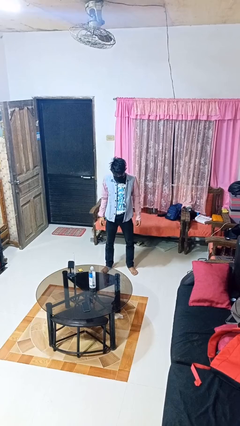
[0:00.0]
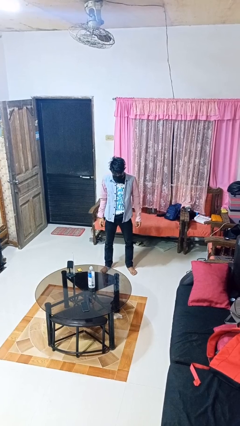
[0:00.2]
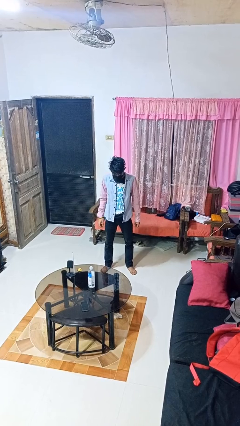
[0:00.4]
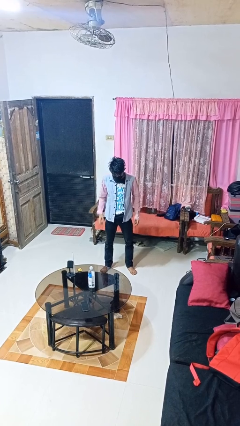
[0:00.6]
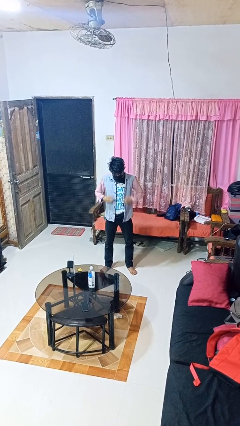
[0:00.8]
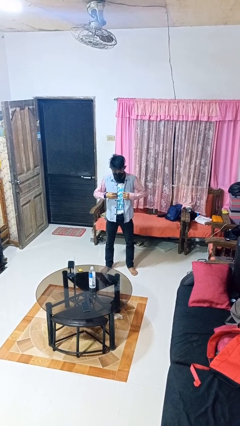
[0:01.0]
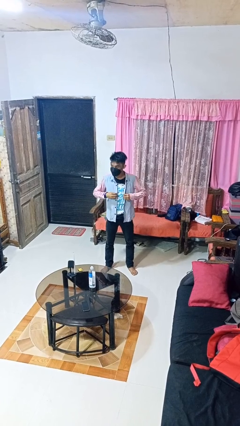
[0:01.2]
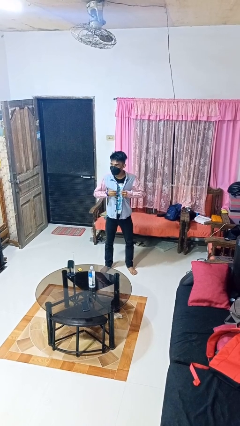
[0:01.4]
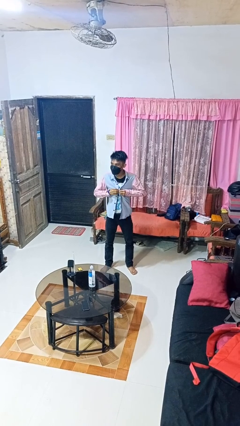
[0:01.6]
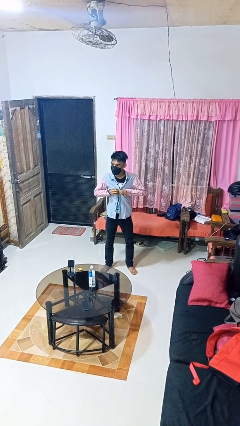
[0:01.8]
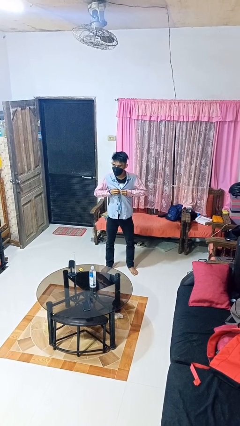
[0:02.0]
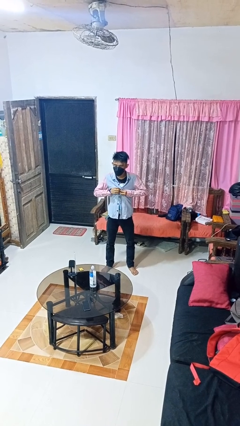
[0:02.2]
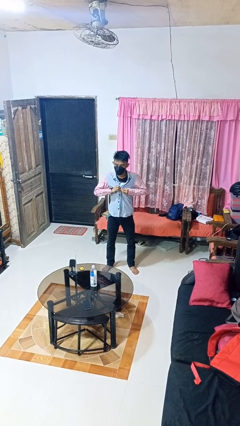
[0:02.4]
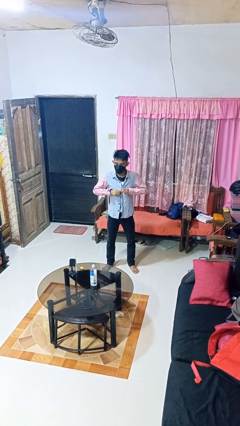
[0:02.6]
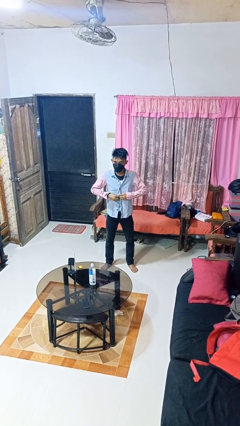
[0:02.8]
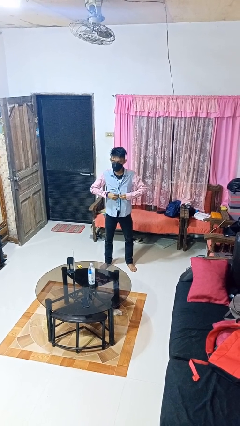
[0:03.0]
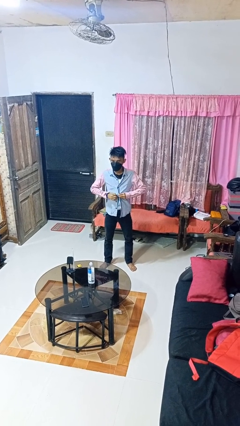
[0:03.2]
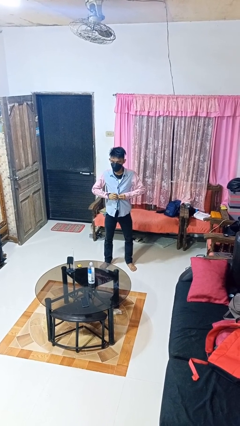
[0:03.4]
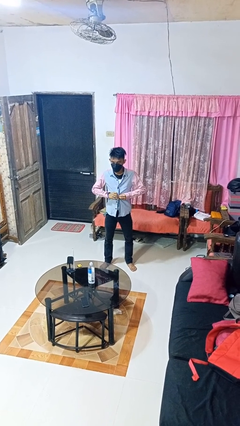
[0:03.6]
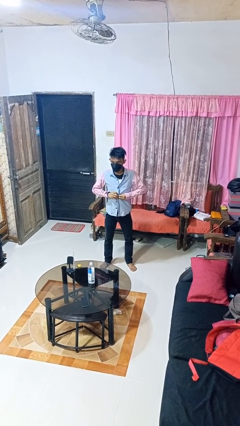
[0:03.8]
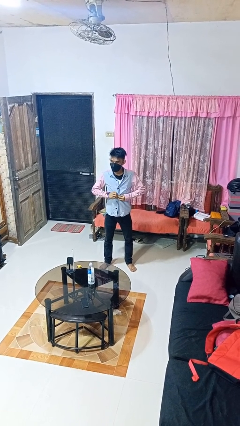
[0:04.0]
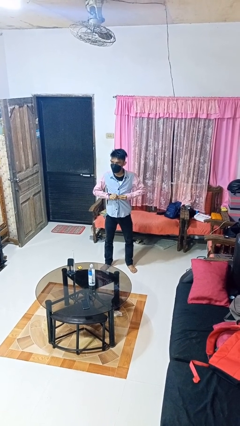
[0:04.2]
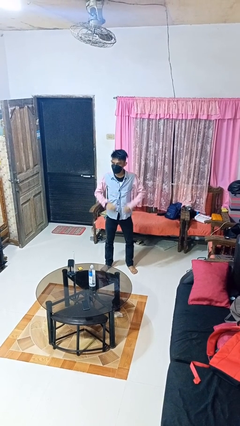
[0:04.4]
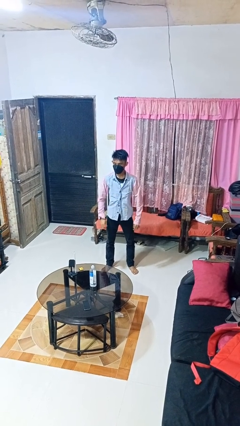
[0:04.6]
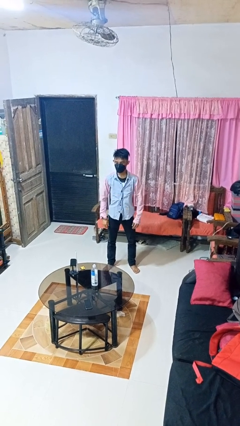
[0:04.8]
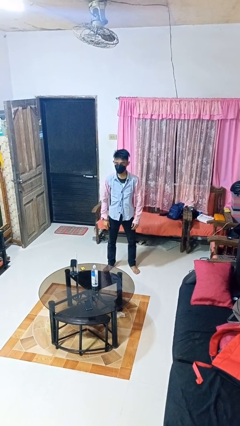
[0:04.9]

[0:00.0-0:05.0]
person buttons shirt

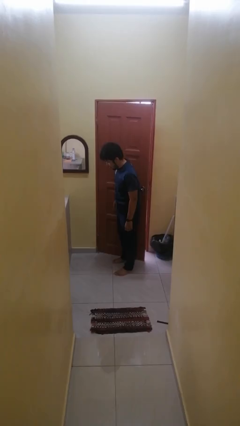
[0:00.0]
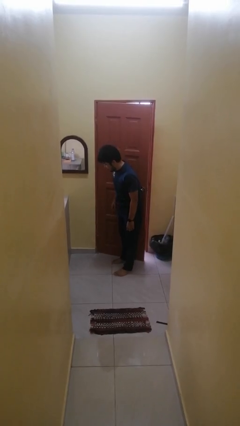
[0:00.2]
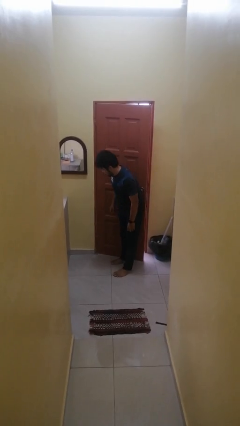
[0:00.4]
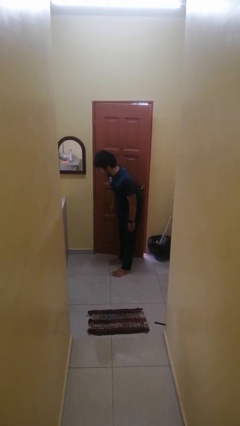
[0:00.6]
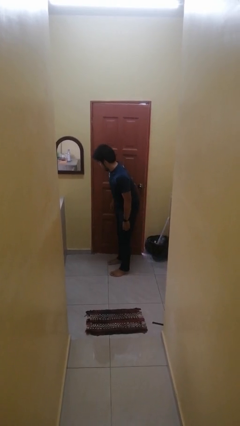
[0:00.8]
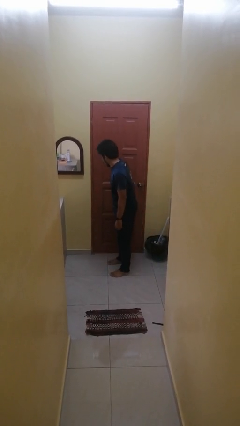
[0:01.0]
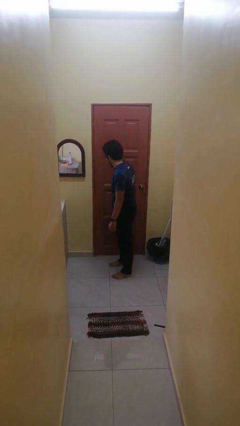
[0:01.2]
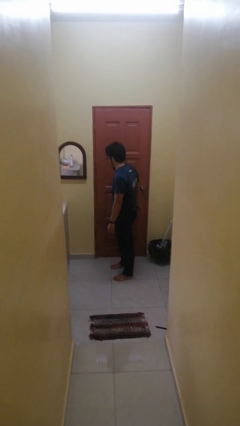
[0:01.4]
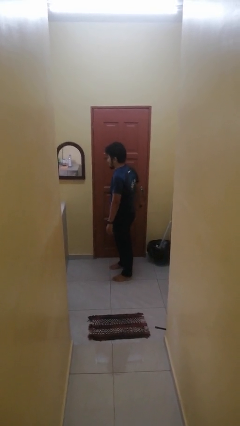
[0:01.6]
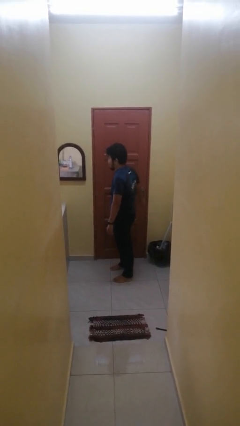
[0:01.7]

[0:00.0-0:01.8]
person closes door with hip

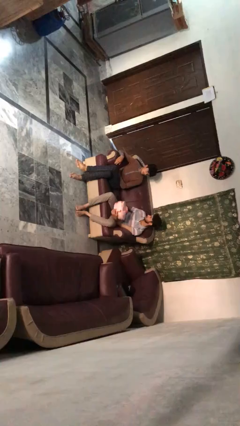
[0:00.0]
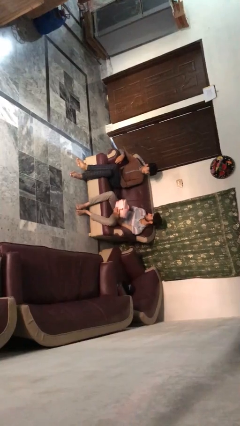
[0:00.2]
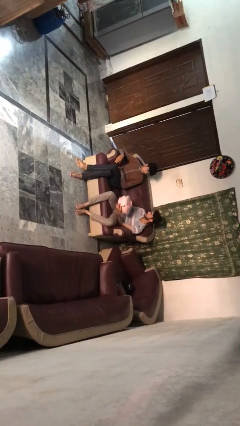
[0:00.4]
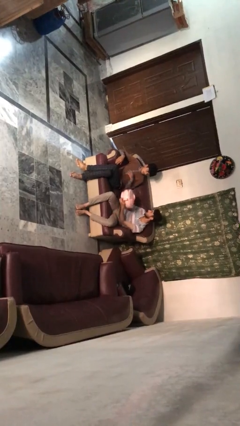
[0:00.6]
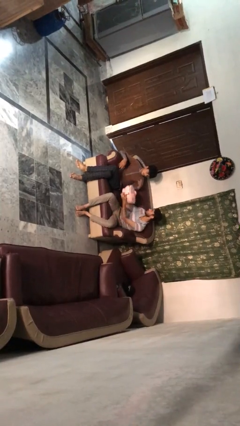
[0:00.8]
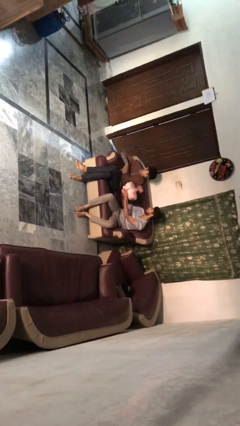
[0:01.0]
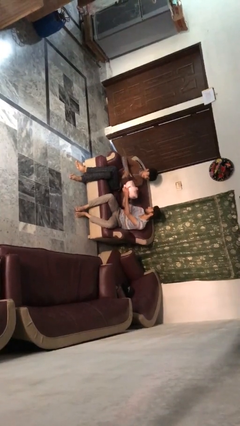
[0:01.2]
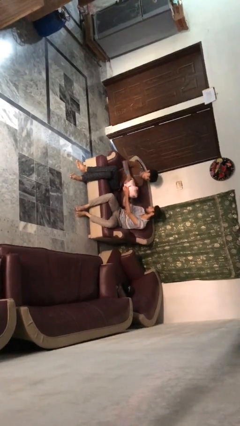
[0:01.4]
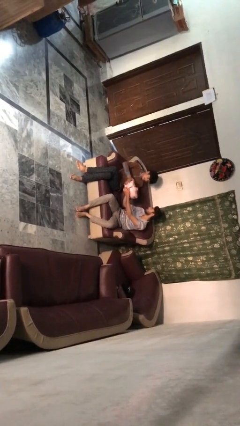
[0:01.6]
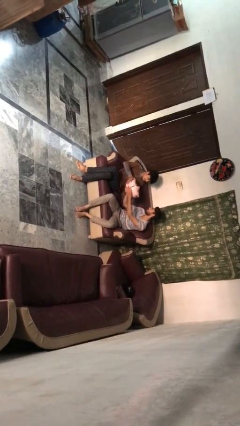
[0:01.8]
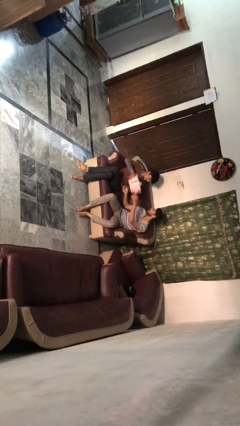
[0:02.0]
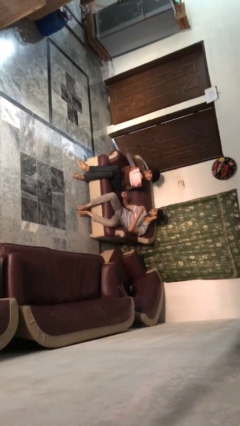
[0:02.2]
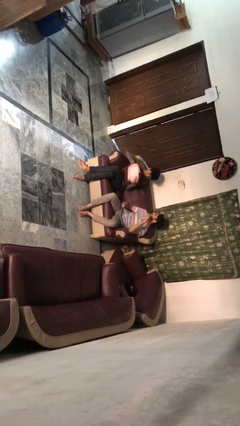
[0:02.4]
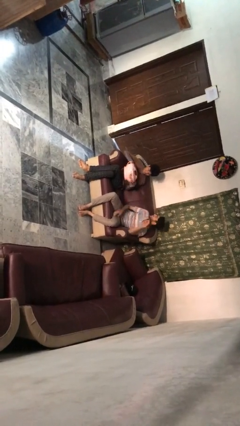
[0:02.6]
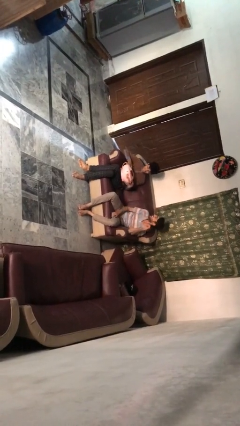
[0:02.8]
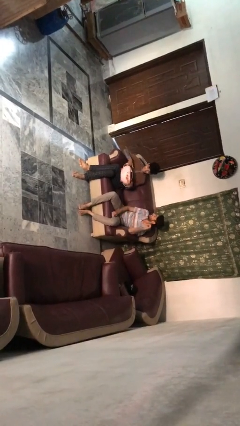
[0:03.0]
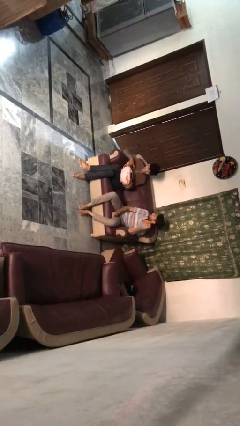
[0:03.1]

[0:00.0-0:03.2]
person transfers object to person

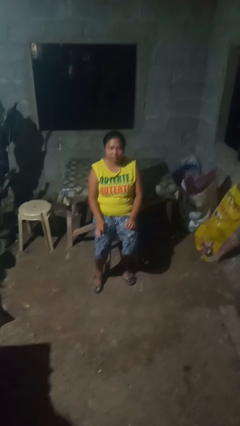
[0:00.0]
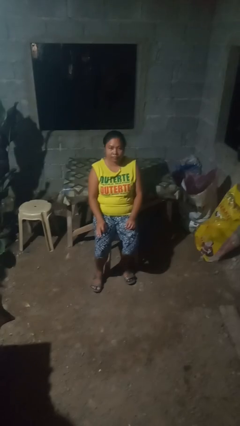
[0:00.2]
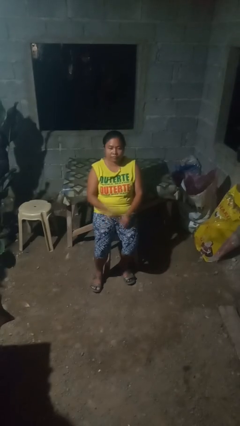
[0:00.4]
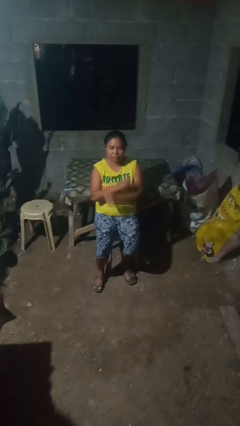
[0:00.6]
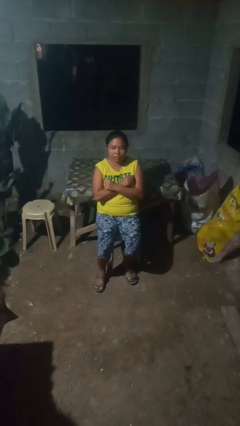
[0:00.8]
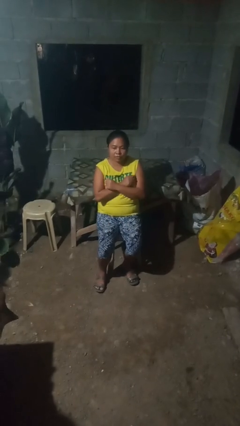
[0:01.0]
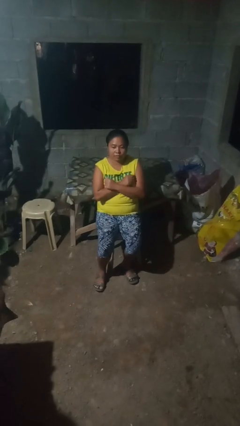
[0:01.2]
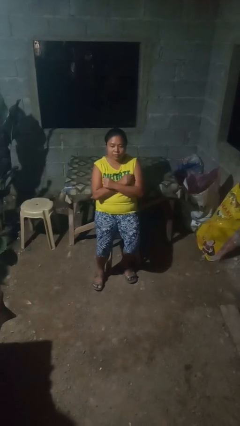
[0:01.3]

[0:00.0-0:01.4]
person crosses arms

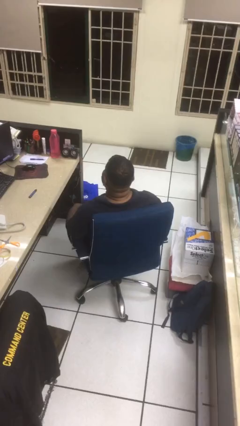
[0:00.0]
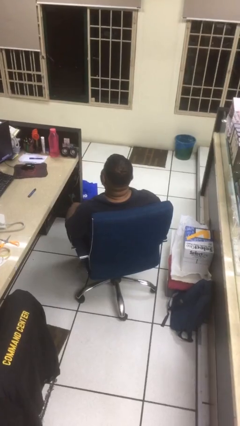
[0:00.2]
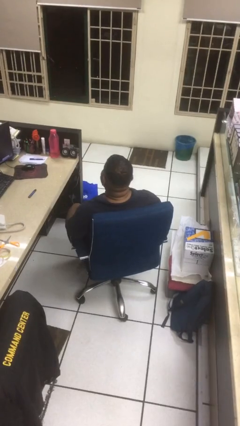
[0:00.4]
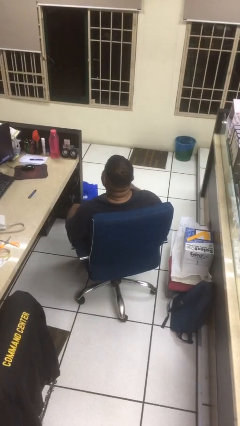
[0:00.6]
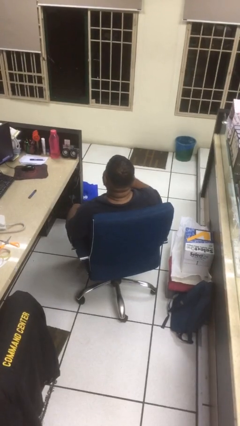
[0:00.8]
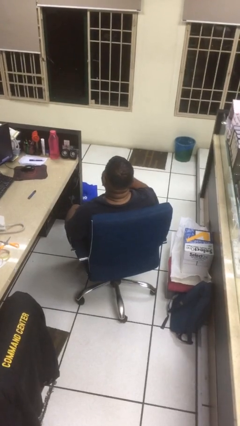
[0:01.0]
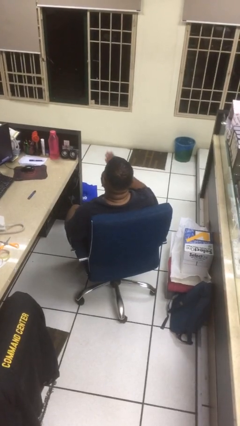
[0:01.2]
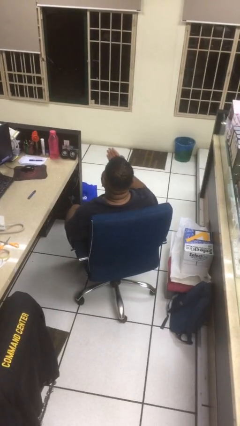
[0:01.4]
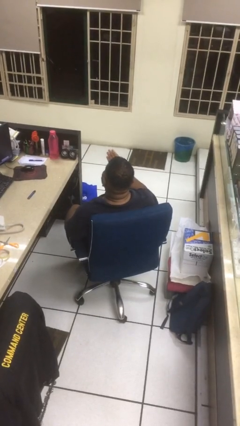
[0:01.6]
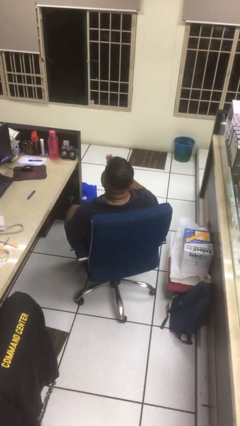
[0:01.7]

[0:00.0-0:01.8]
person gestures blow kiss

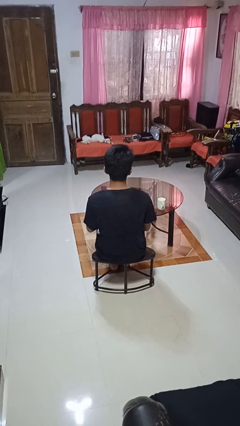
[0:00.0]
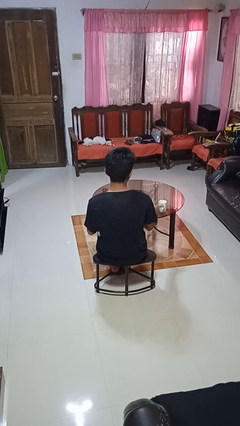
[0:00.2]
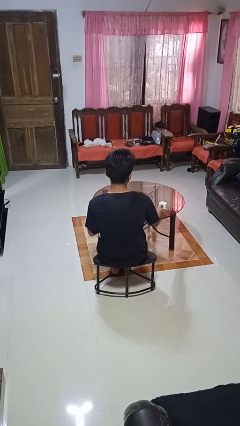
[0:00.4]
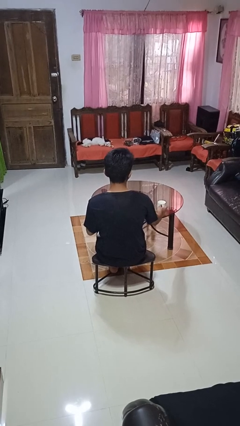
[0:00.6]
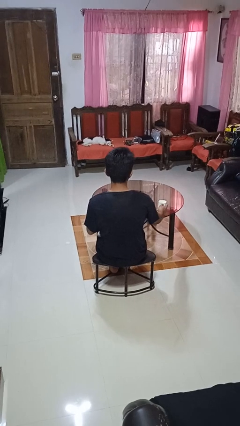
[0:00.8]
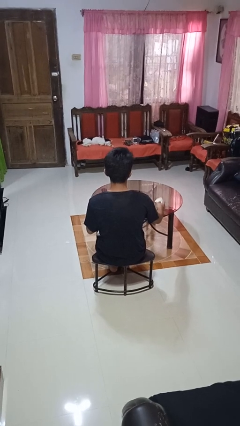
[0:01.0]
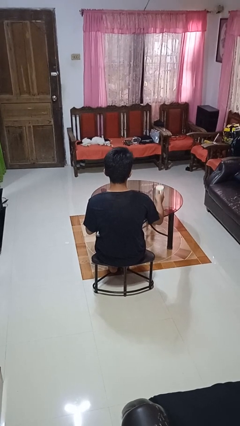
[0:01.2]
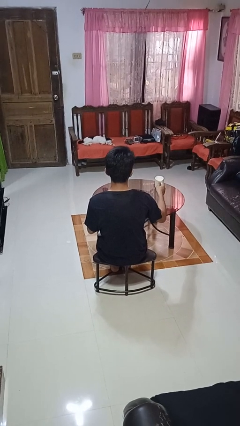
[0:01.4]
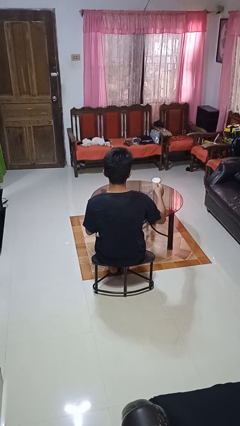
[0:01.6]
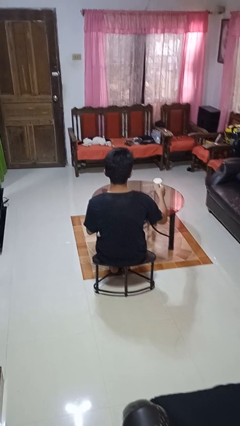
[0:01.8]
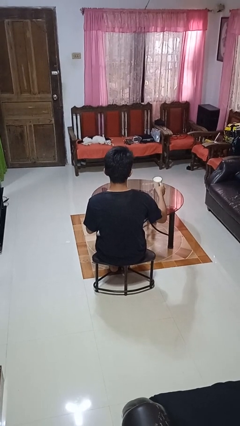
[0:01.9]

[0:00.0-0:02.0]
person picks up object from table

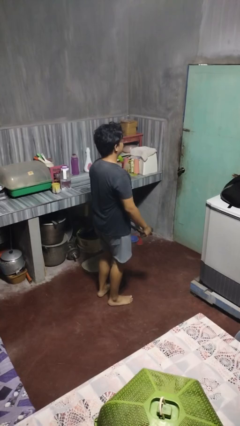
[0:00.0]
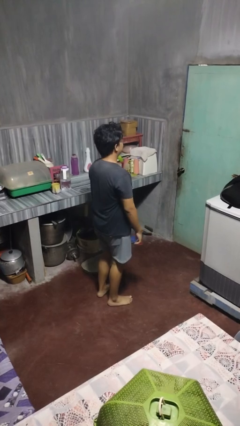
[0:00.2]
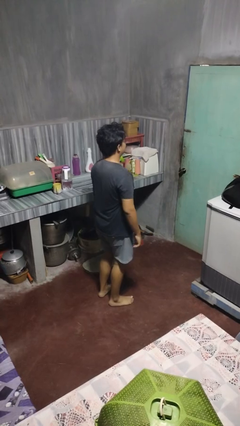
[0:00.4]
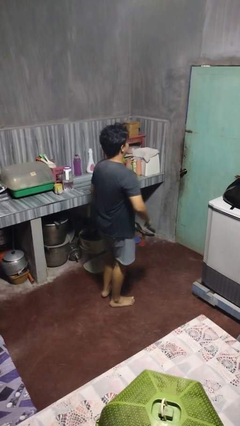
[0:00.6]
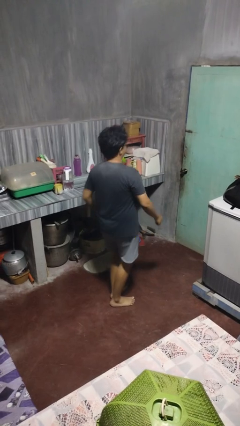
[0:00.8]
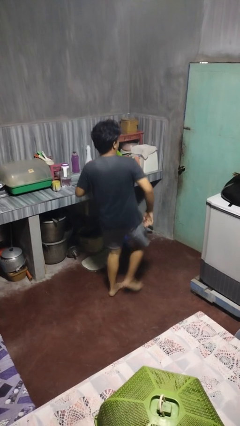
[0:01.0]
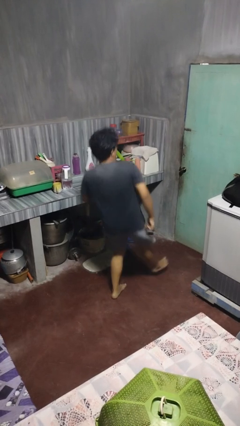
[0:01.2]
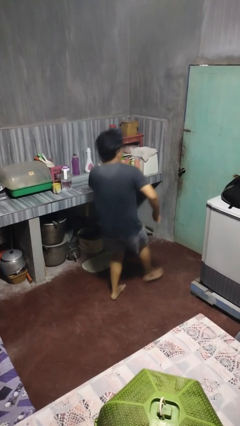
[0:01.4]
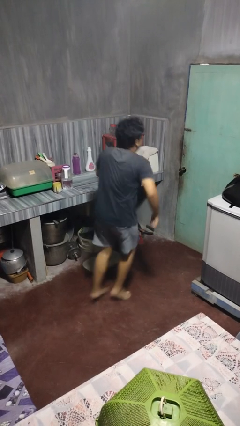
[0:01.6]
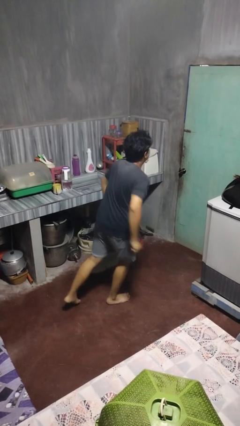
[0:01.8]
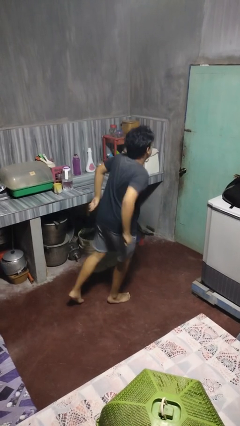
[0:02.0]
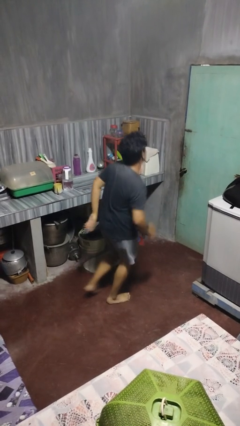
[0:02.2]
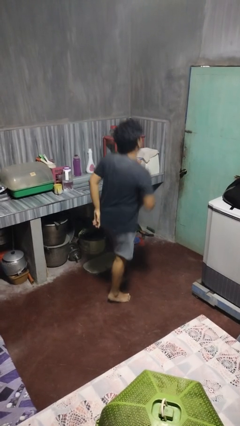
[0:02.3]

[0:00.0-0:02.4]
person dances in place
